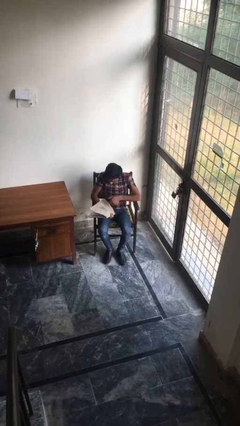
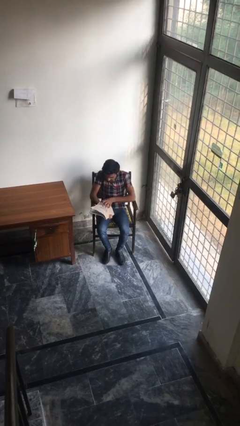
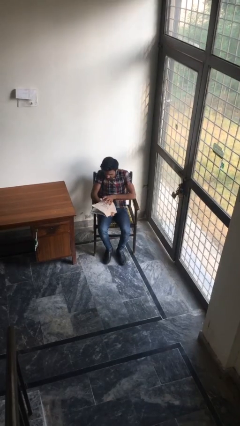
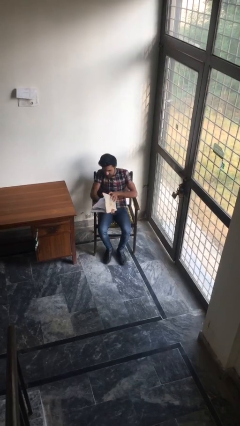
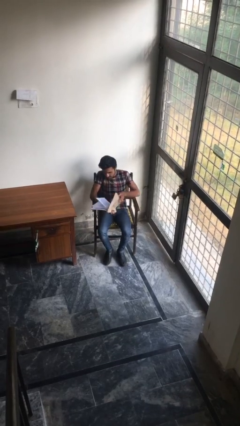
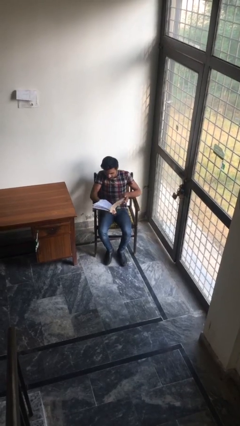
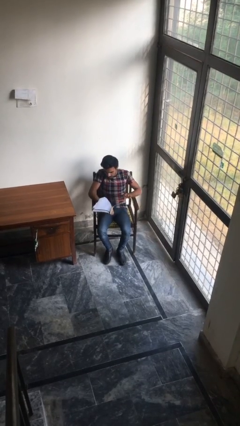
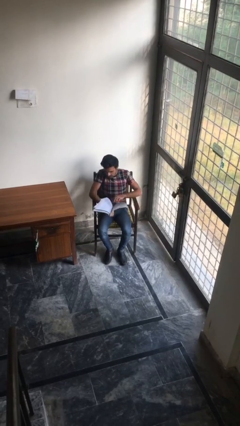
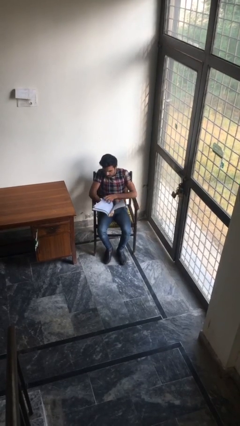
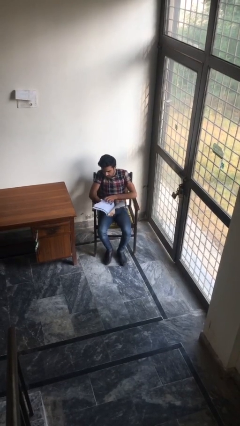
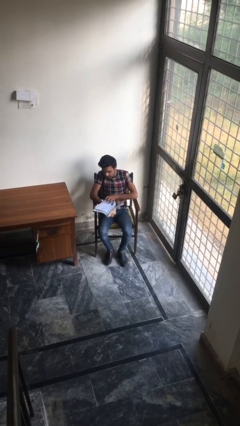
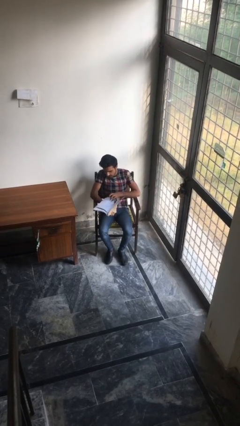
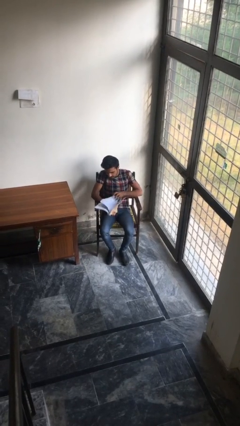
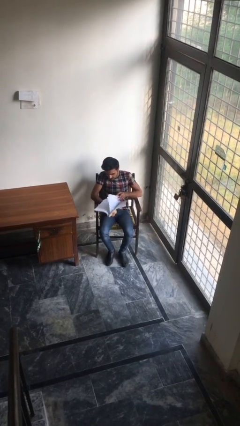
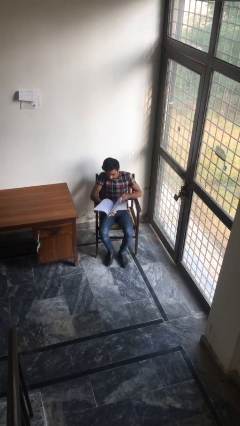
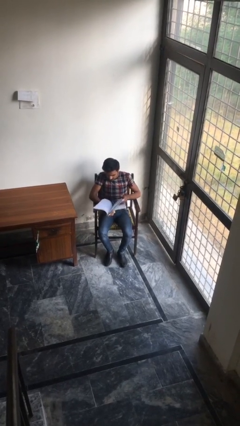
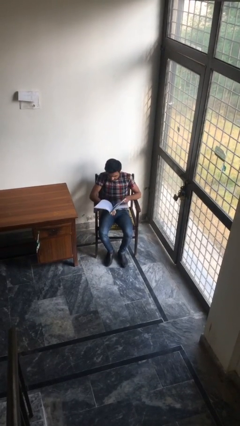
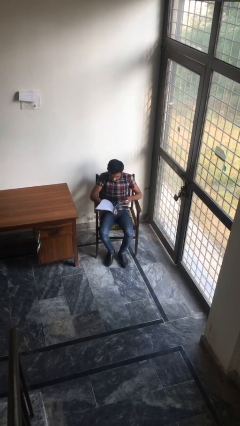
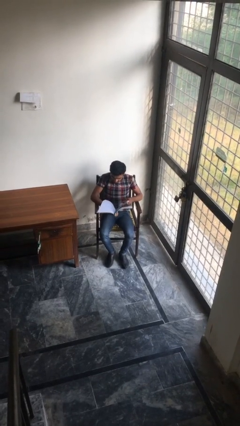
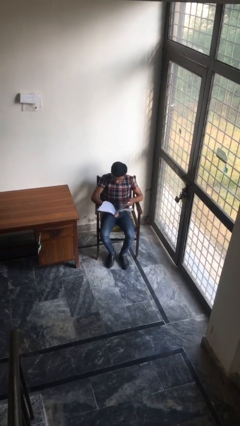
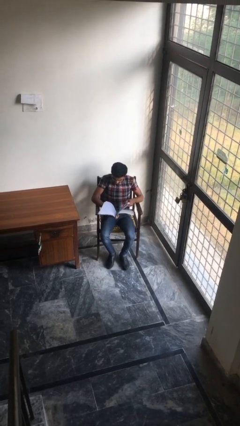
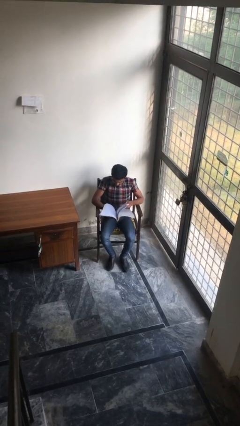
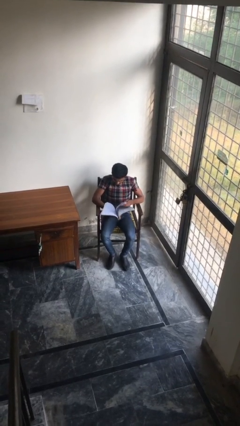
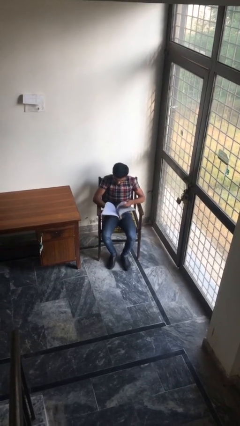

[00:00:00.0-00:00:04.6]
person reads document

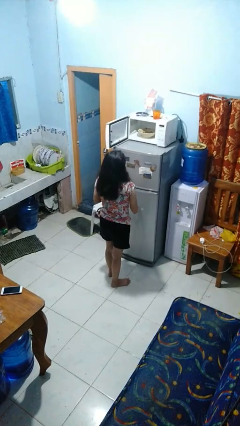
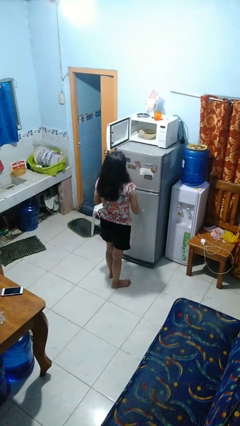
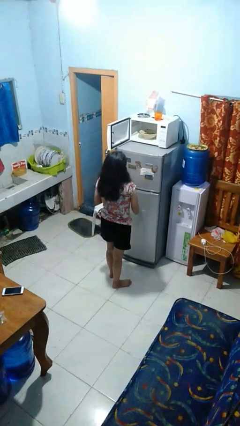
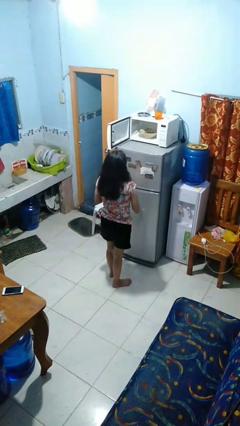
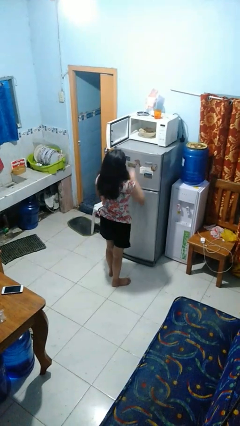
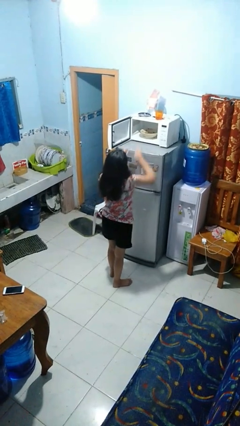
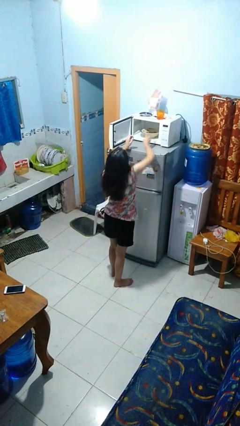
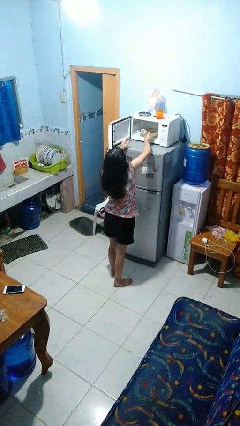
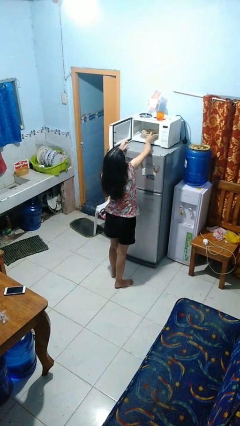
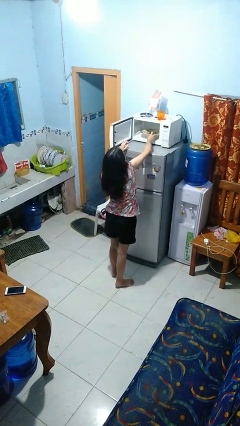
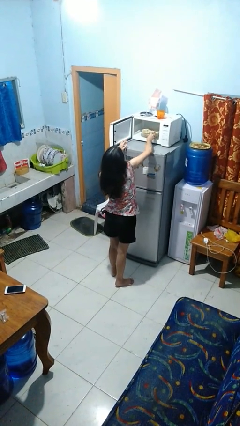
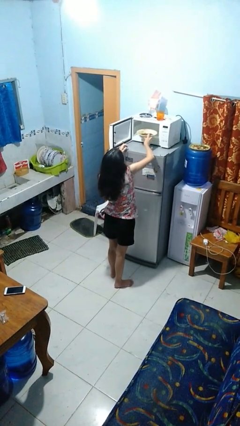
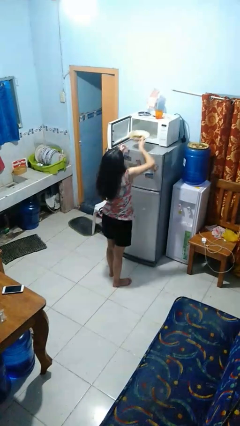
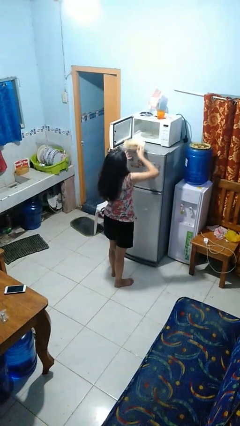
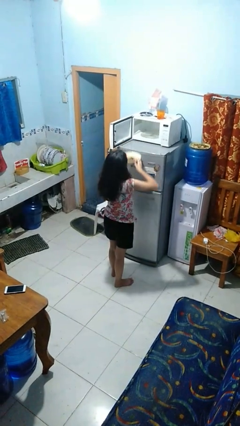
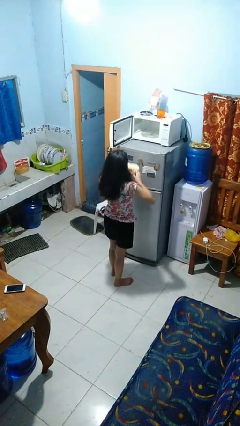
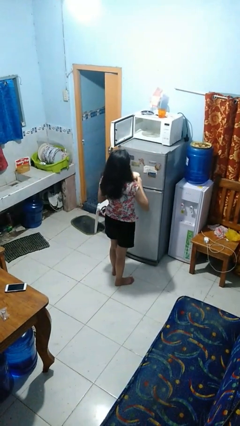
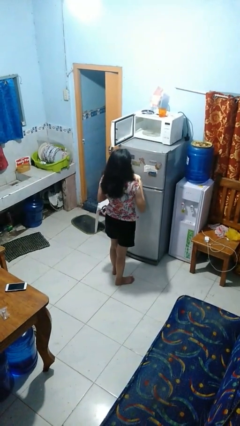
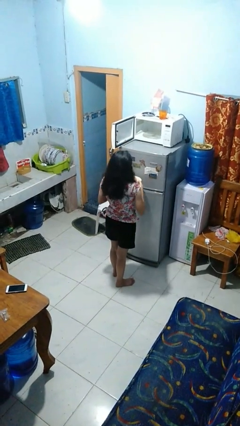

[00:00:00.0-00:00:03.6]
person takes object from microwave

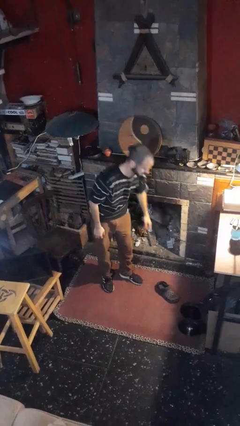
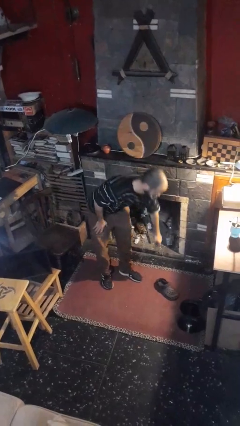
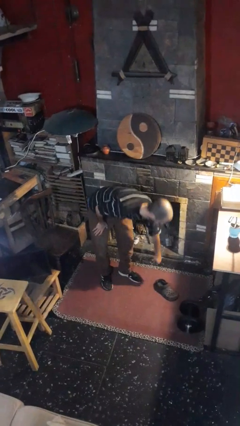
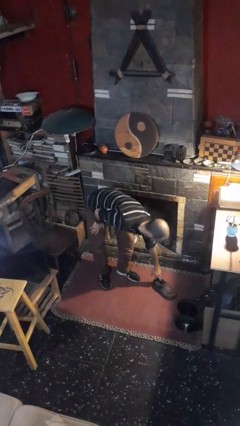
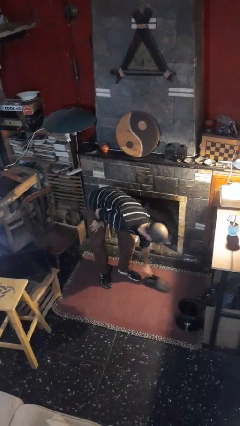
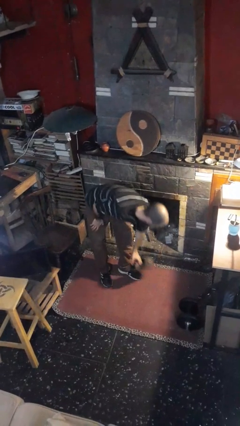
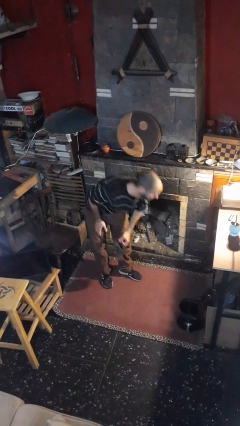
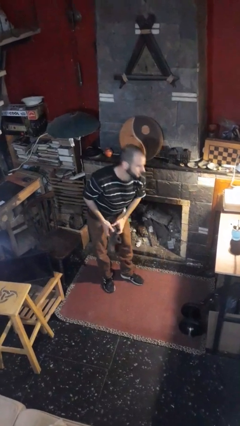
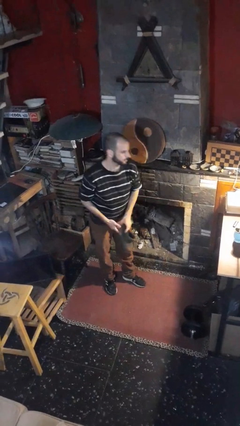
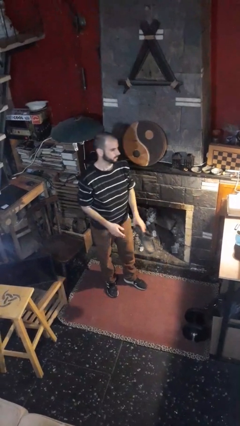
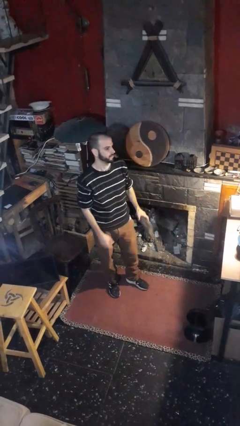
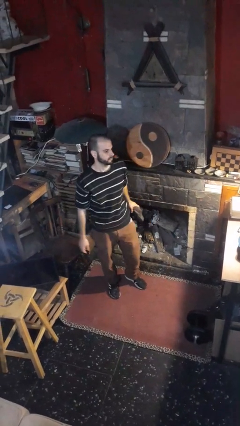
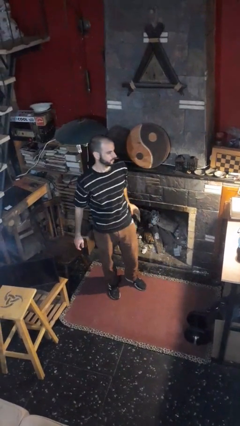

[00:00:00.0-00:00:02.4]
person picks up object from floor

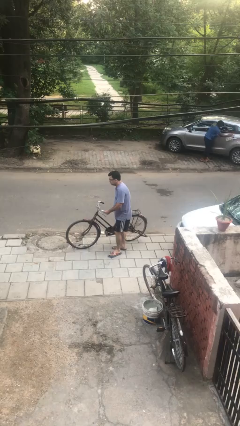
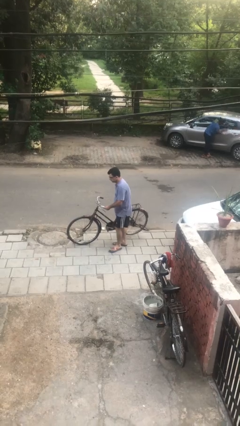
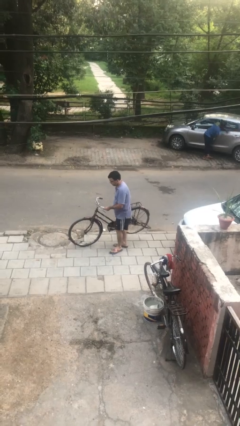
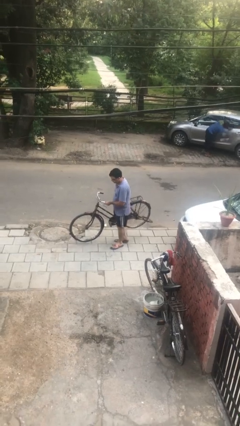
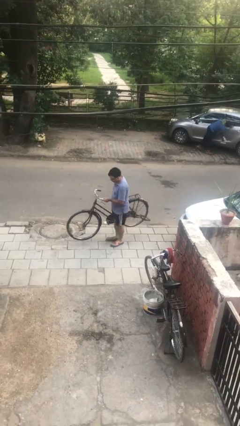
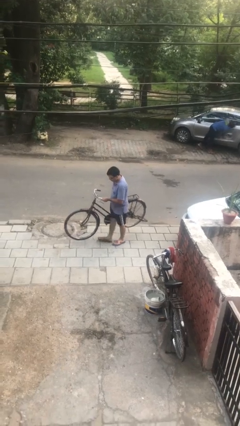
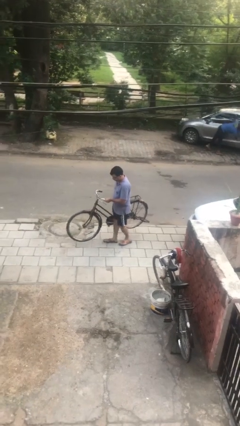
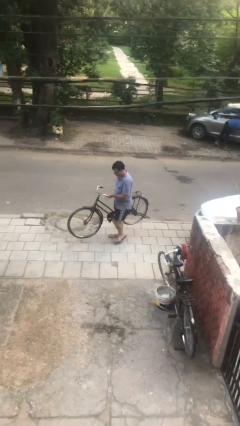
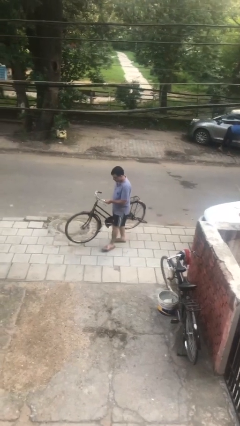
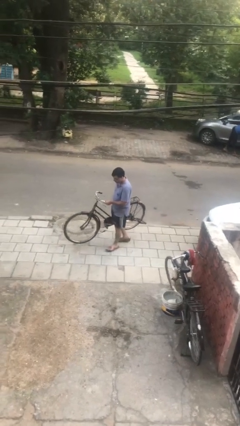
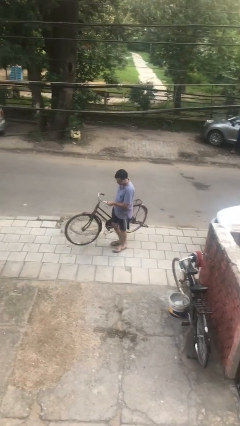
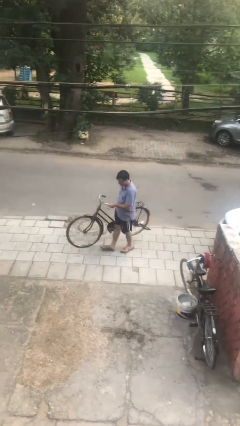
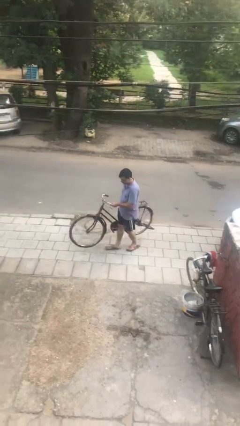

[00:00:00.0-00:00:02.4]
person carries bicycle

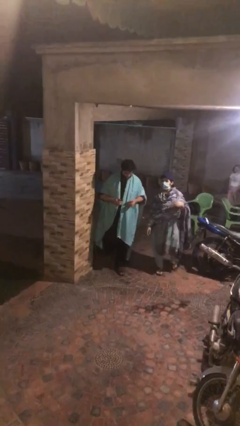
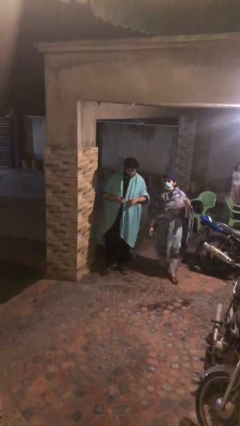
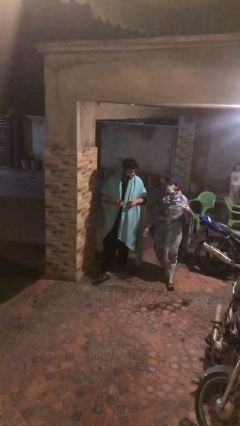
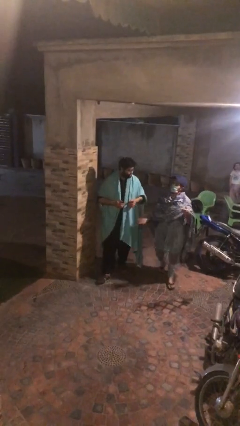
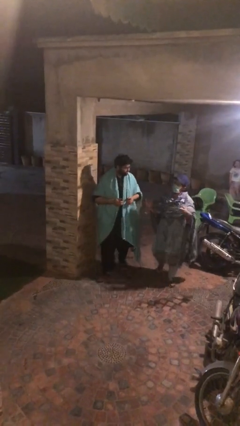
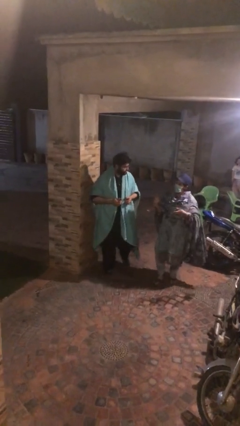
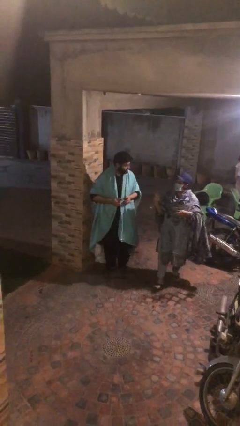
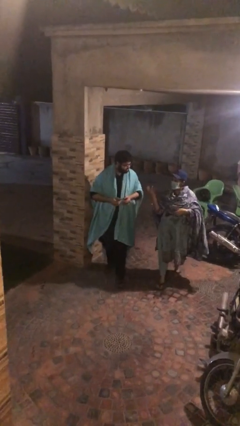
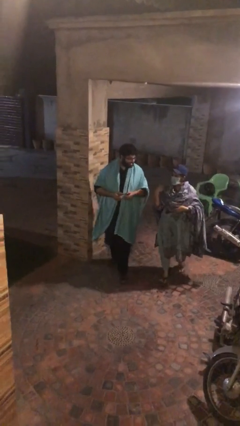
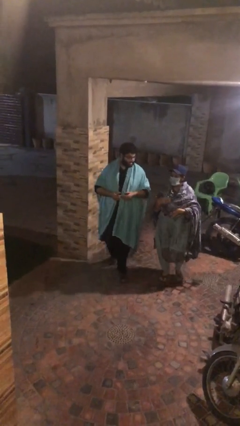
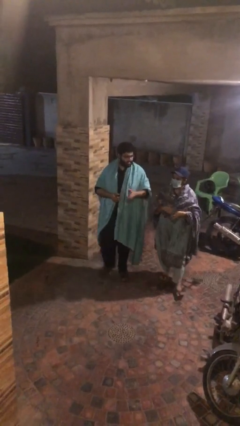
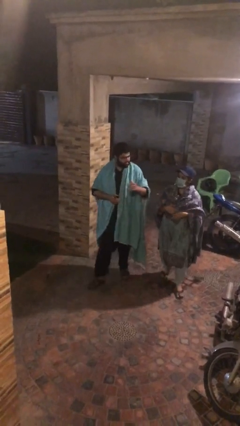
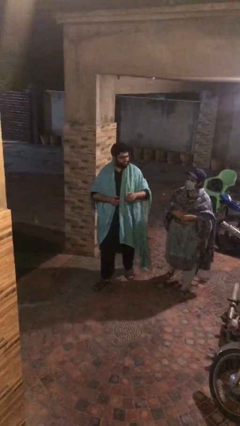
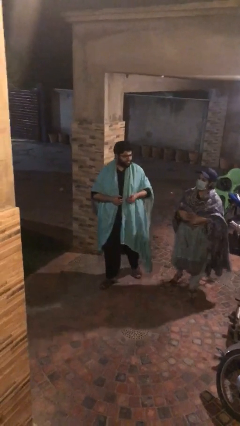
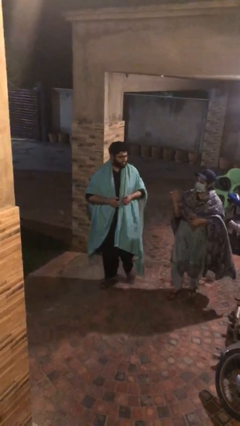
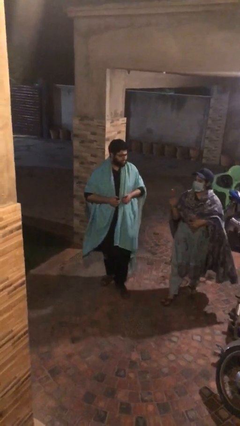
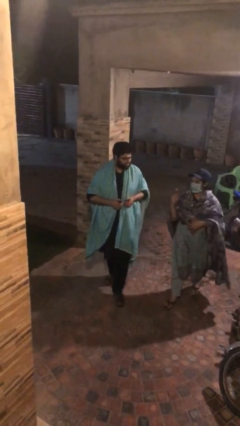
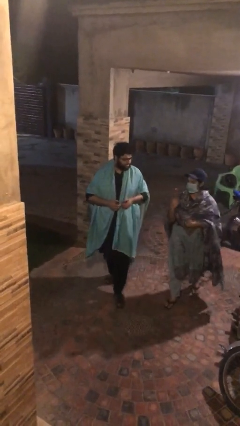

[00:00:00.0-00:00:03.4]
person talks to person

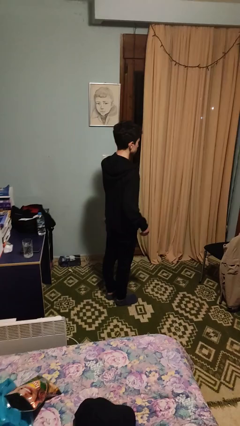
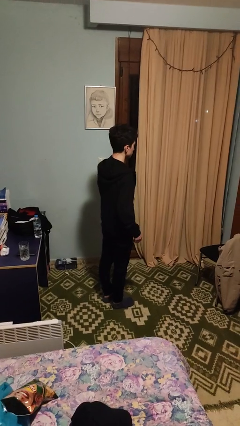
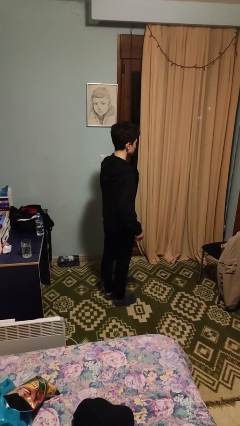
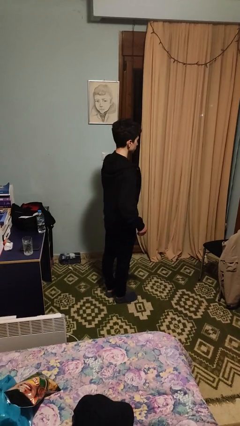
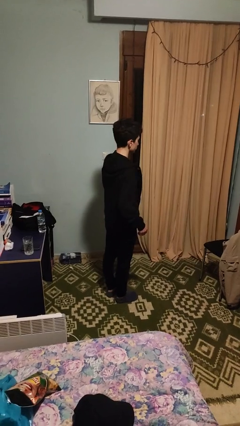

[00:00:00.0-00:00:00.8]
person unzips jacket

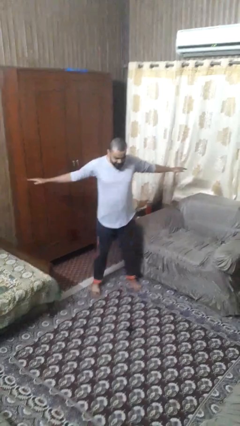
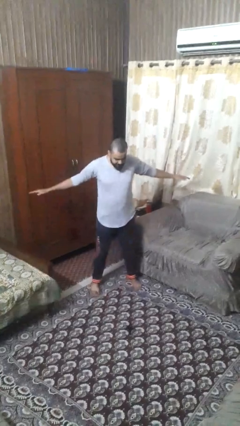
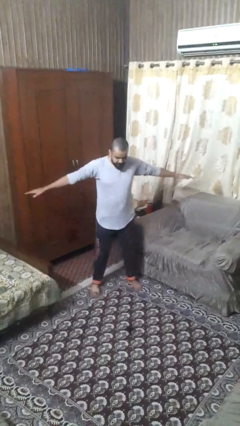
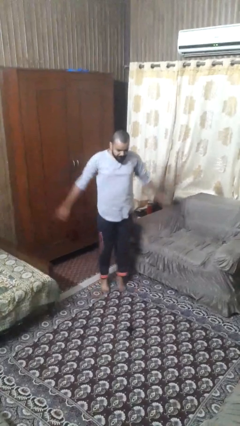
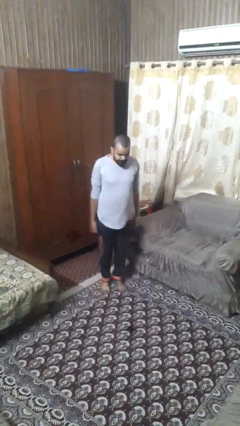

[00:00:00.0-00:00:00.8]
person exercises with jumping jacks
